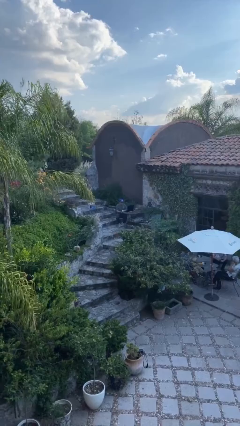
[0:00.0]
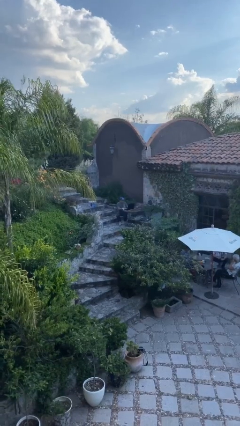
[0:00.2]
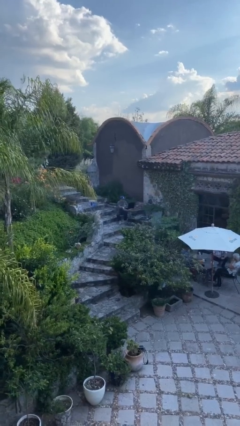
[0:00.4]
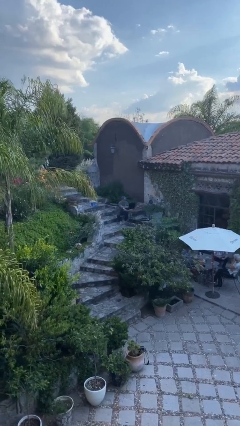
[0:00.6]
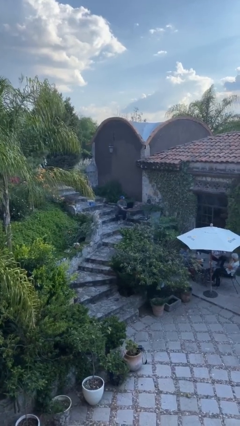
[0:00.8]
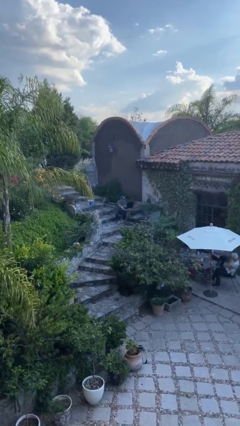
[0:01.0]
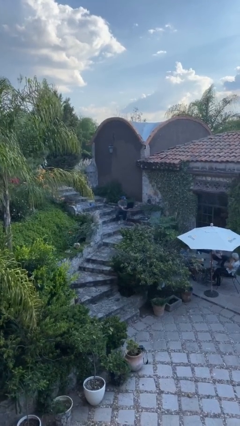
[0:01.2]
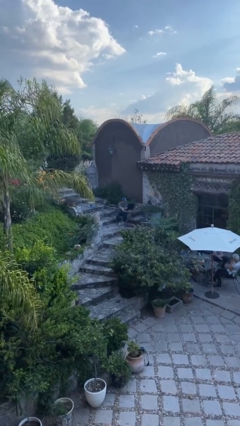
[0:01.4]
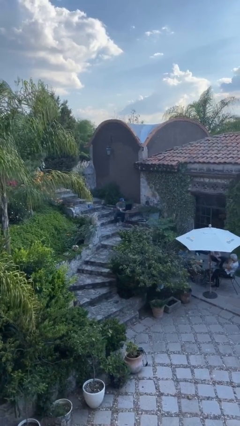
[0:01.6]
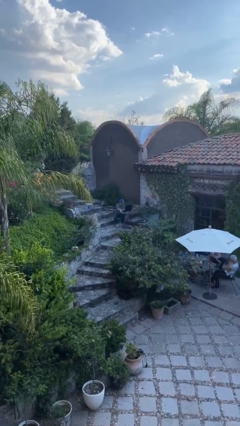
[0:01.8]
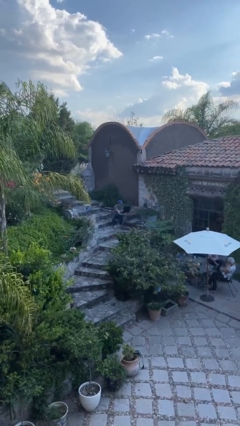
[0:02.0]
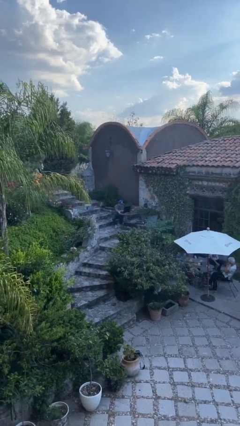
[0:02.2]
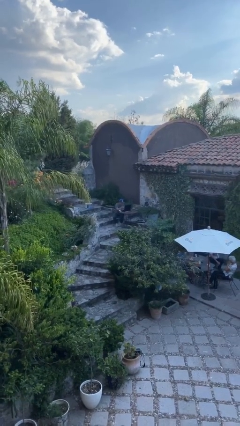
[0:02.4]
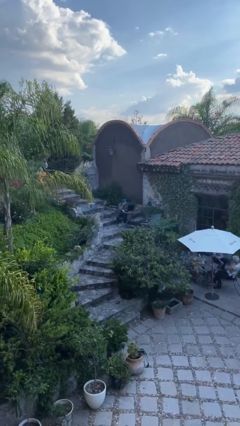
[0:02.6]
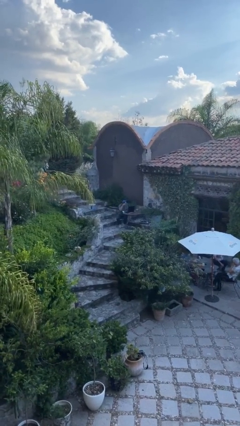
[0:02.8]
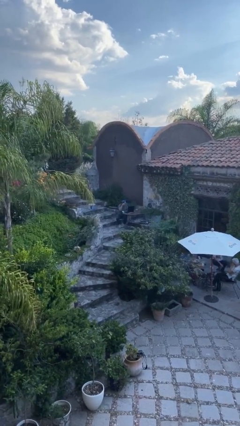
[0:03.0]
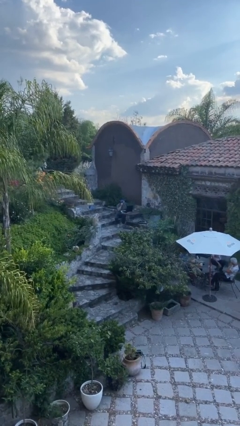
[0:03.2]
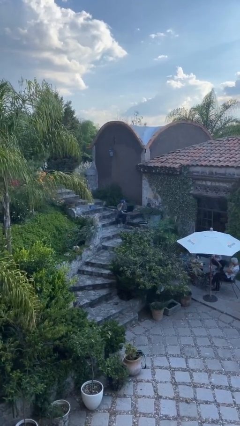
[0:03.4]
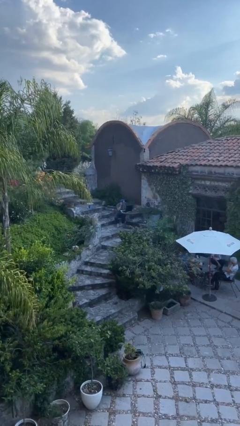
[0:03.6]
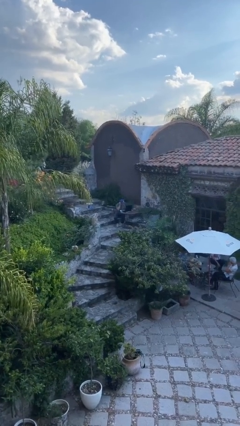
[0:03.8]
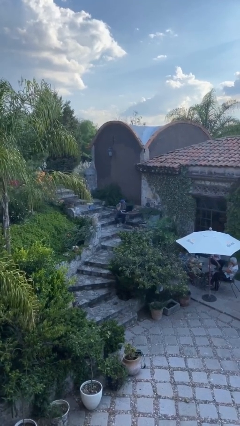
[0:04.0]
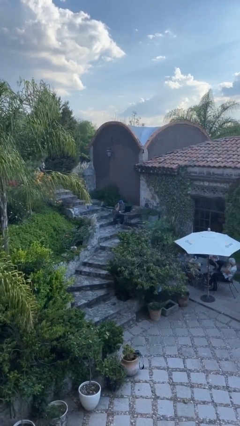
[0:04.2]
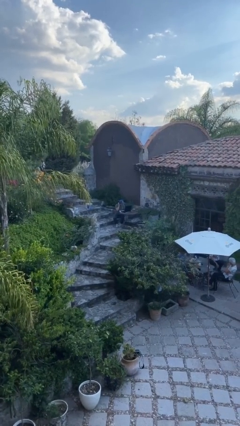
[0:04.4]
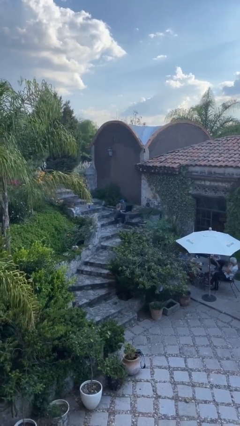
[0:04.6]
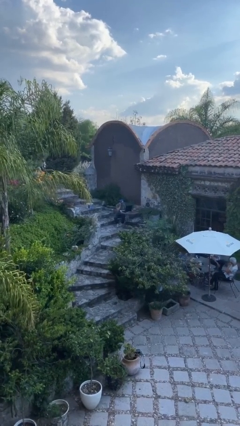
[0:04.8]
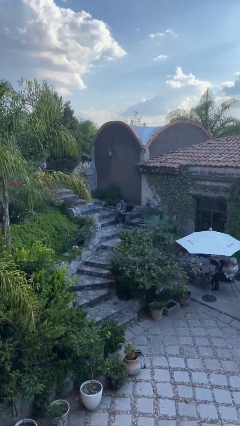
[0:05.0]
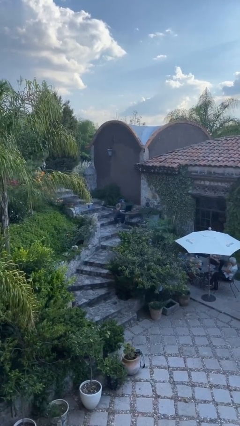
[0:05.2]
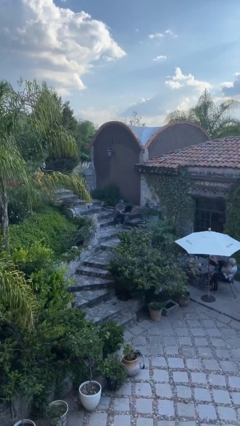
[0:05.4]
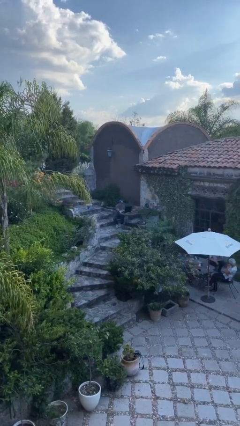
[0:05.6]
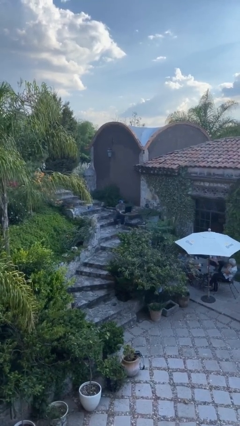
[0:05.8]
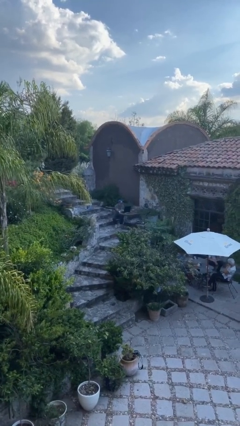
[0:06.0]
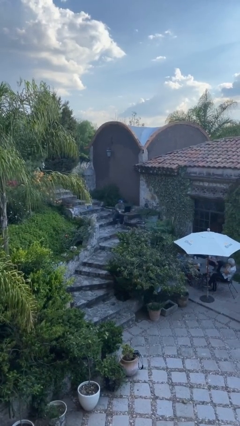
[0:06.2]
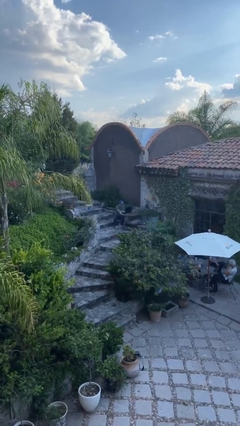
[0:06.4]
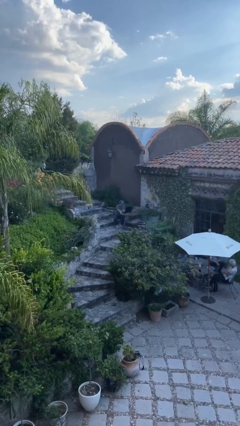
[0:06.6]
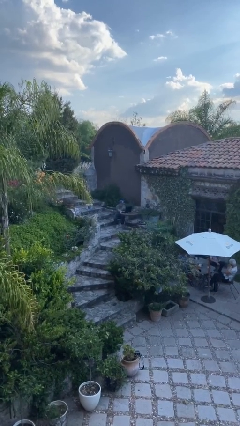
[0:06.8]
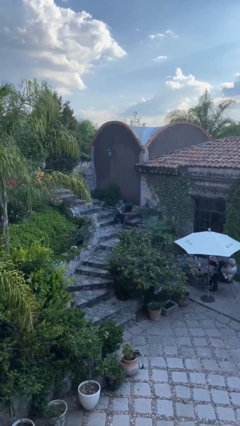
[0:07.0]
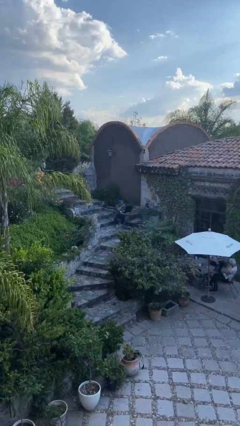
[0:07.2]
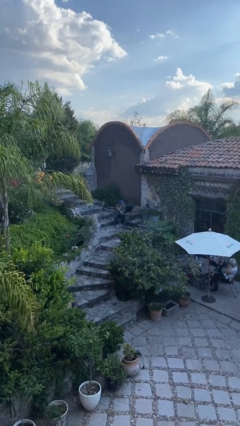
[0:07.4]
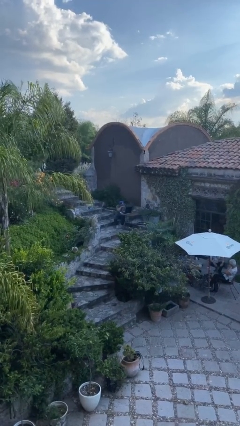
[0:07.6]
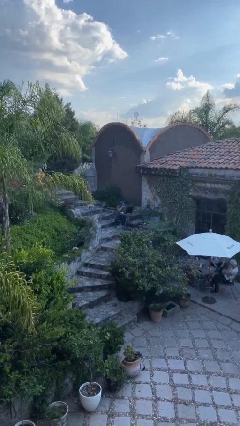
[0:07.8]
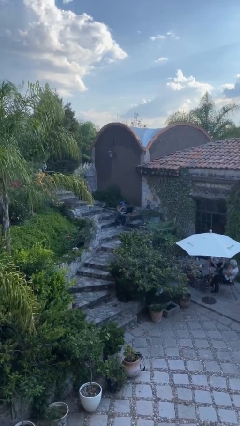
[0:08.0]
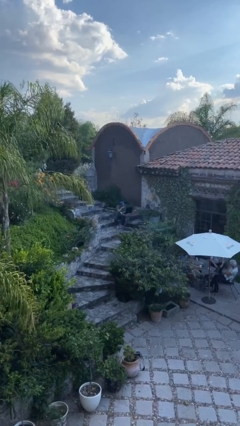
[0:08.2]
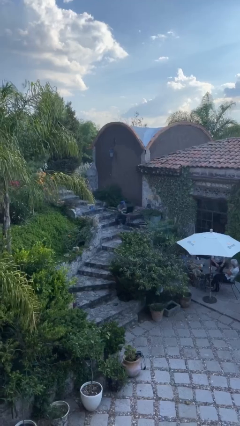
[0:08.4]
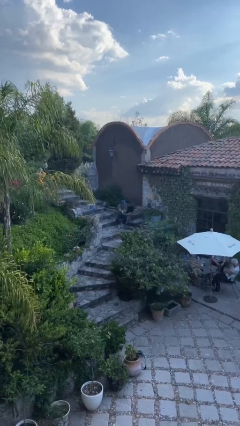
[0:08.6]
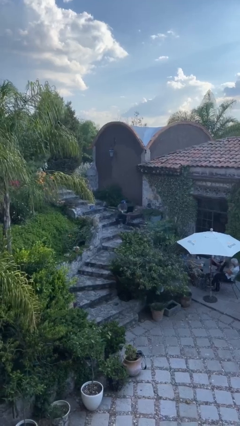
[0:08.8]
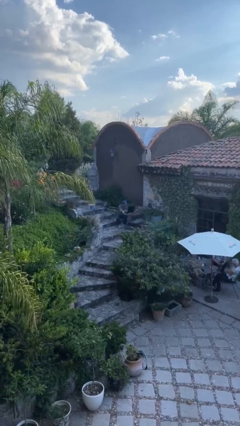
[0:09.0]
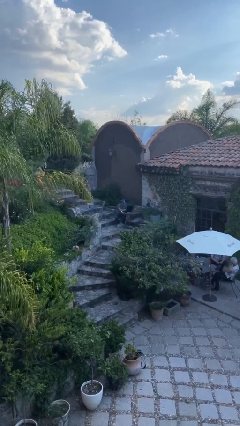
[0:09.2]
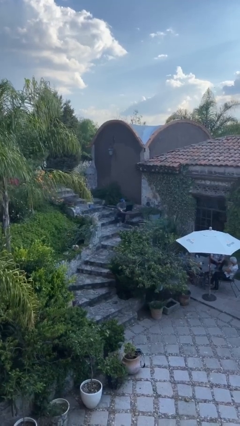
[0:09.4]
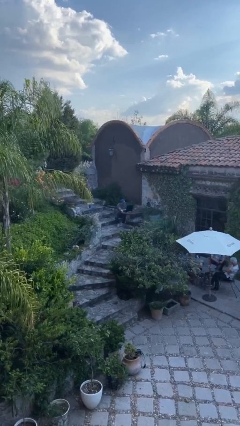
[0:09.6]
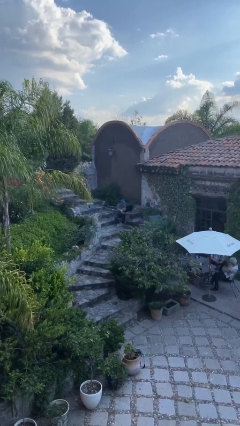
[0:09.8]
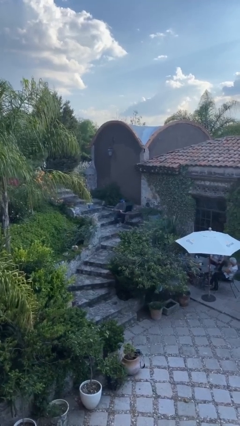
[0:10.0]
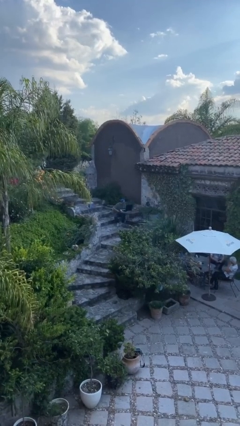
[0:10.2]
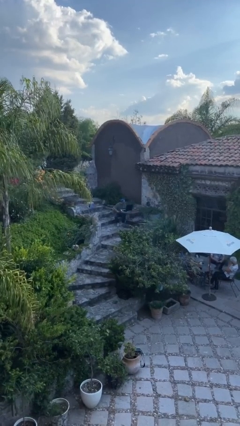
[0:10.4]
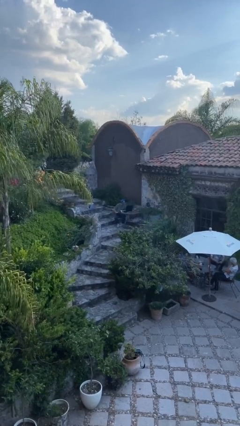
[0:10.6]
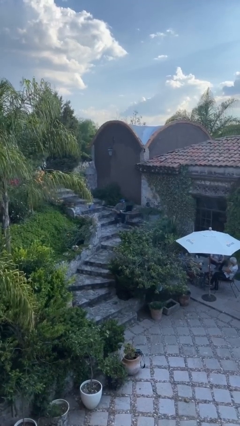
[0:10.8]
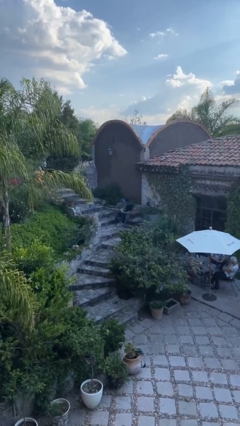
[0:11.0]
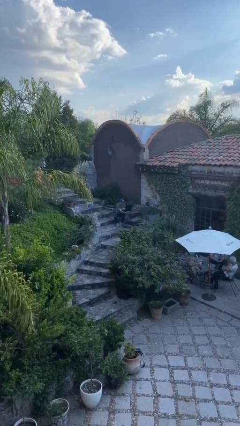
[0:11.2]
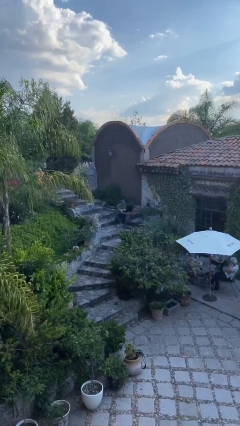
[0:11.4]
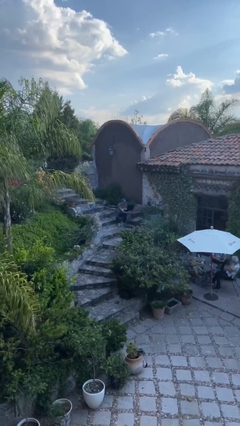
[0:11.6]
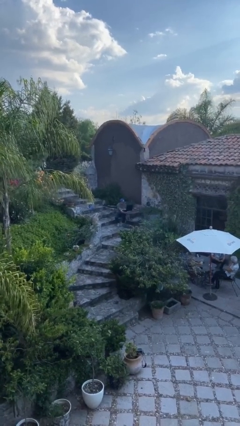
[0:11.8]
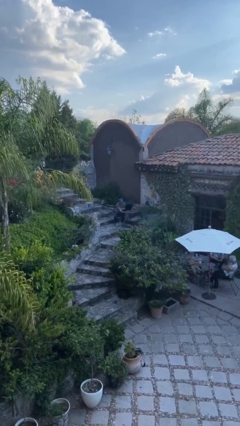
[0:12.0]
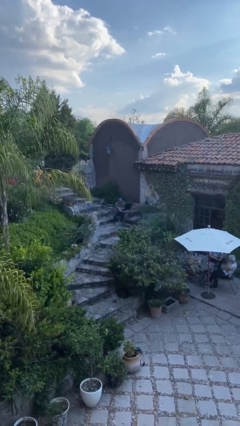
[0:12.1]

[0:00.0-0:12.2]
person interacts with laptop

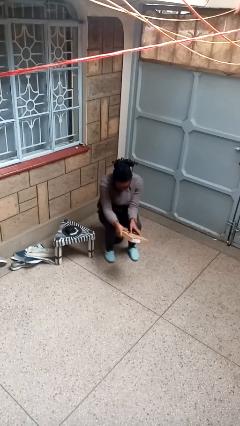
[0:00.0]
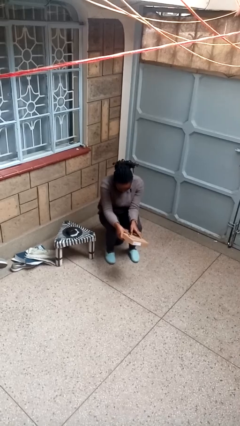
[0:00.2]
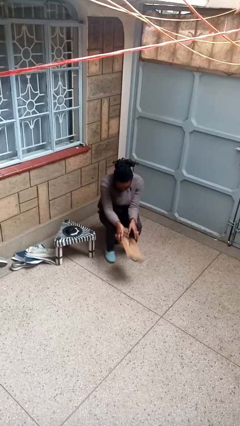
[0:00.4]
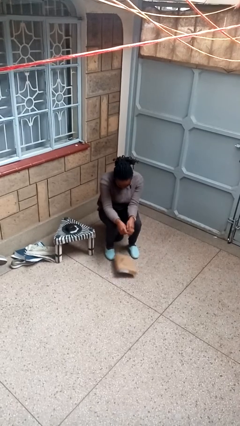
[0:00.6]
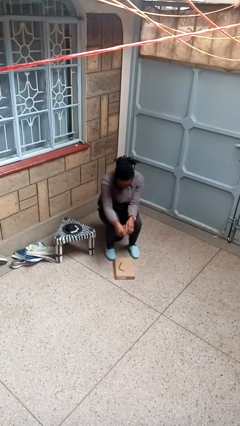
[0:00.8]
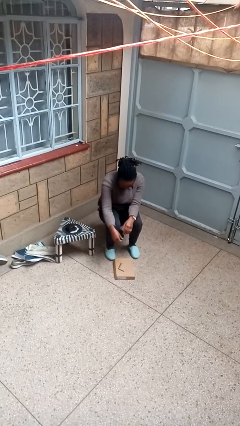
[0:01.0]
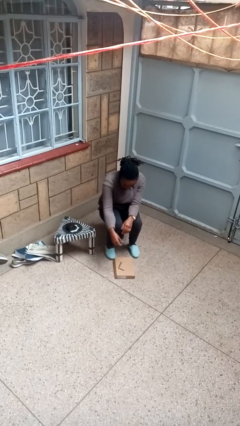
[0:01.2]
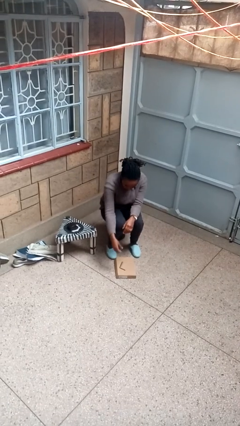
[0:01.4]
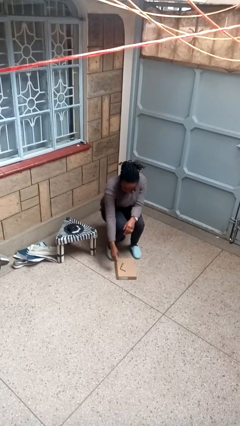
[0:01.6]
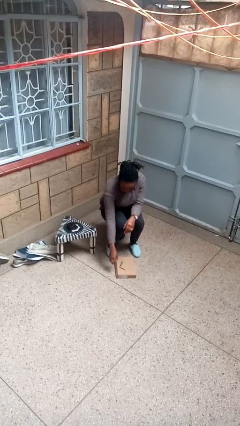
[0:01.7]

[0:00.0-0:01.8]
person drops object

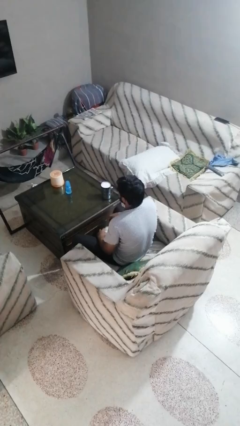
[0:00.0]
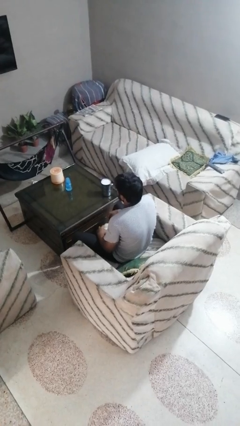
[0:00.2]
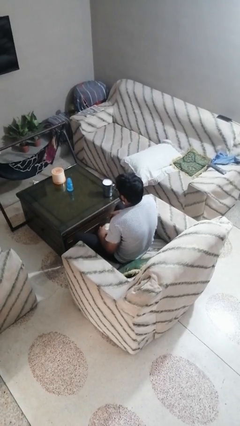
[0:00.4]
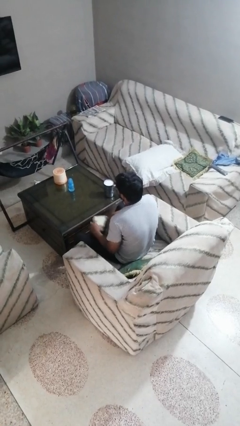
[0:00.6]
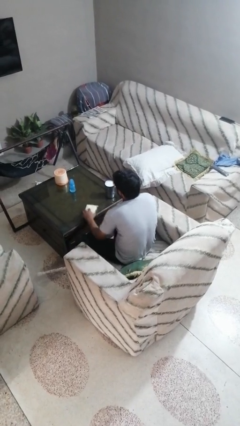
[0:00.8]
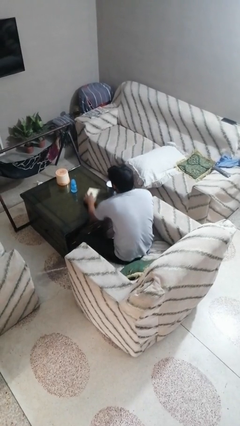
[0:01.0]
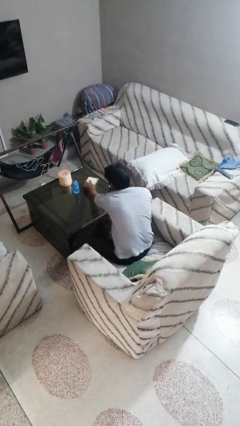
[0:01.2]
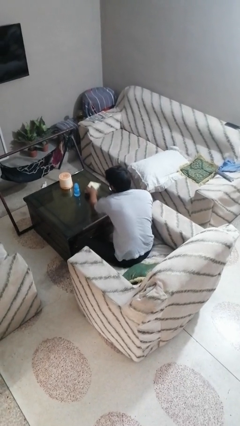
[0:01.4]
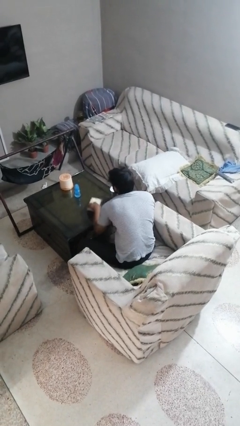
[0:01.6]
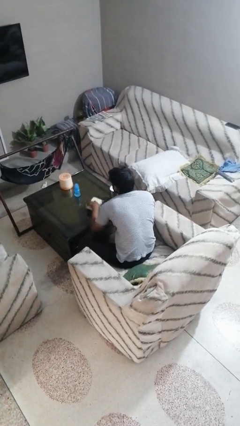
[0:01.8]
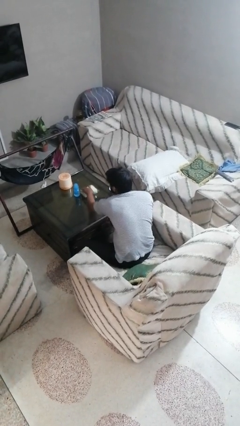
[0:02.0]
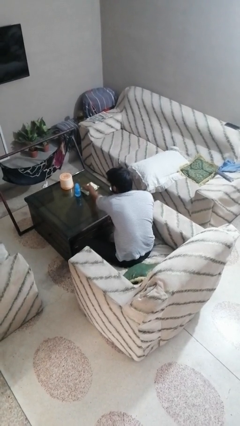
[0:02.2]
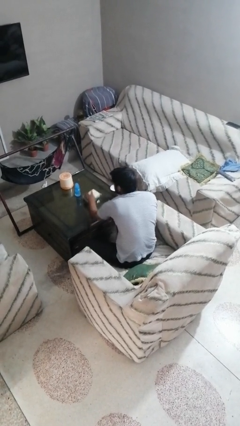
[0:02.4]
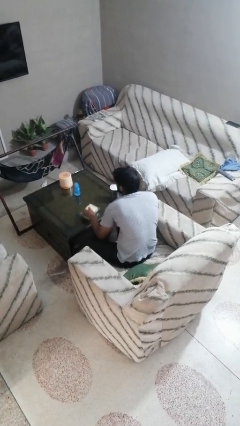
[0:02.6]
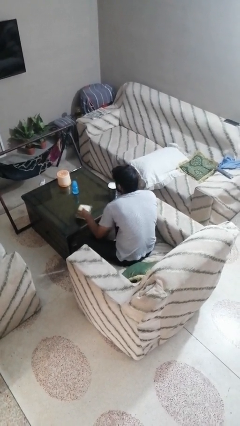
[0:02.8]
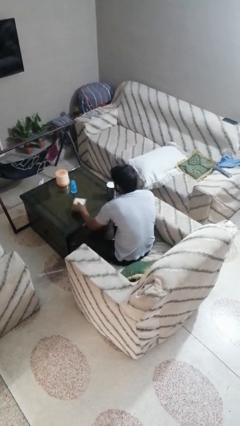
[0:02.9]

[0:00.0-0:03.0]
person dusts furniture

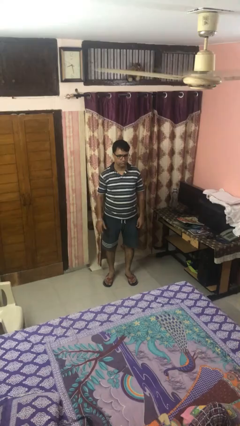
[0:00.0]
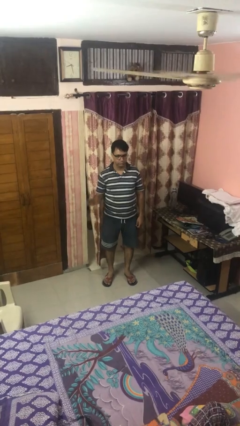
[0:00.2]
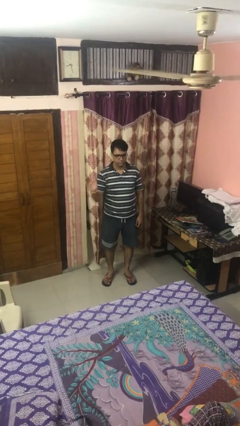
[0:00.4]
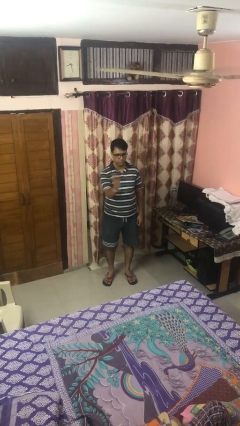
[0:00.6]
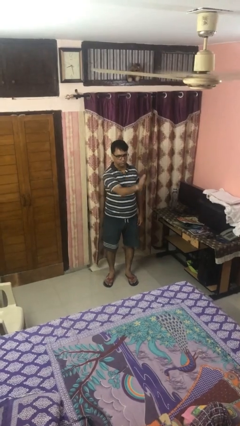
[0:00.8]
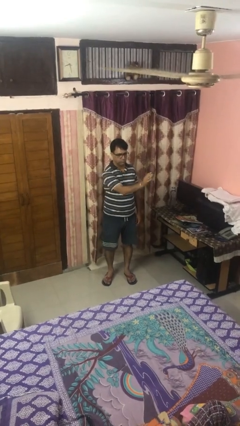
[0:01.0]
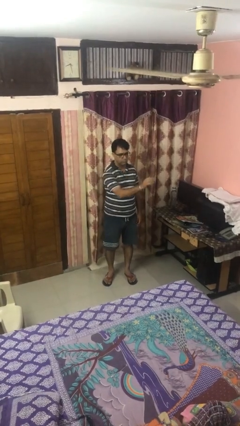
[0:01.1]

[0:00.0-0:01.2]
person gestures swipe left
